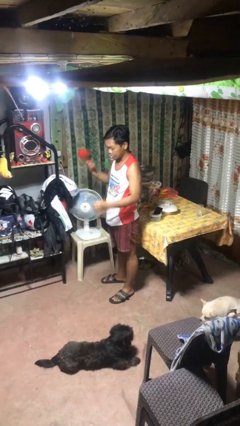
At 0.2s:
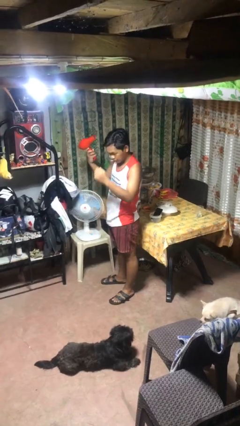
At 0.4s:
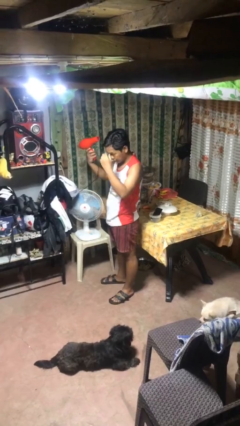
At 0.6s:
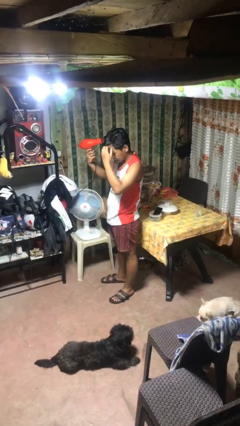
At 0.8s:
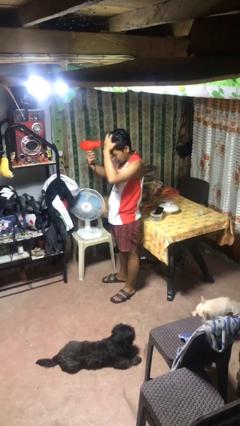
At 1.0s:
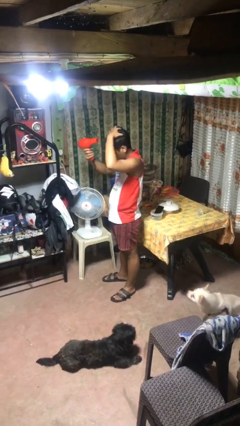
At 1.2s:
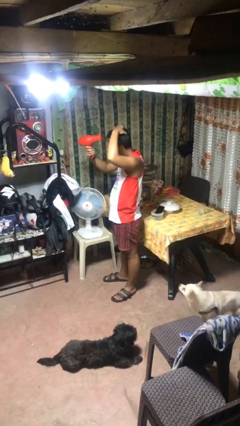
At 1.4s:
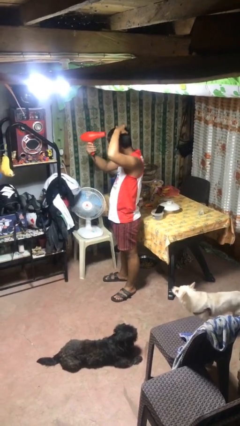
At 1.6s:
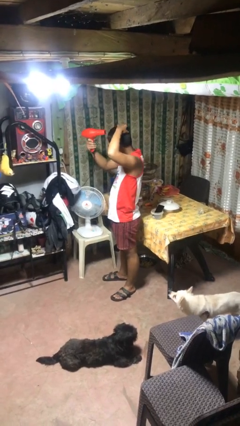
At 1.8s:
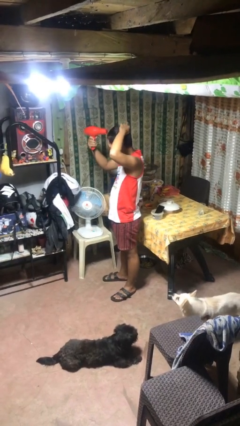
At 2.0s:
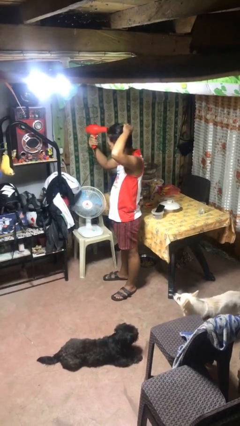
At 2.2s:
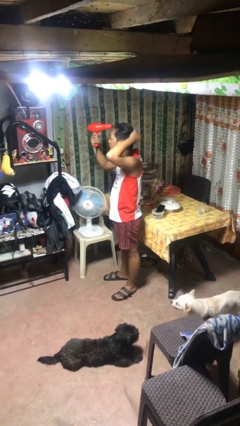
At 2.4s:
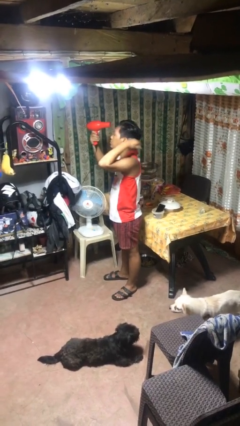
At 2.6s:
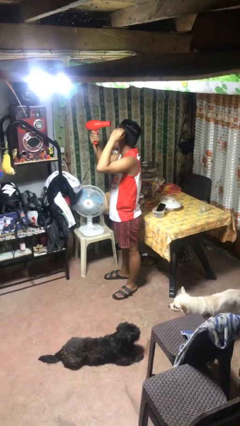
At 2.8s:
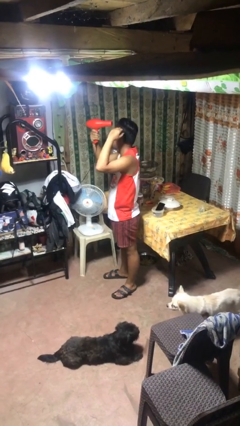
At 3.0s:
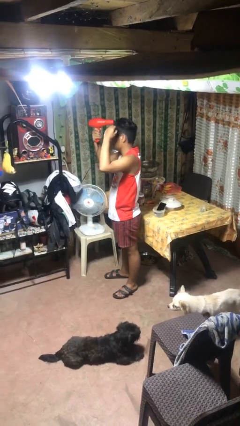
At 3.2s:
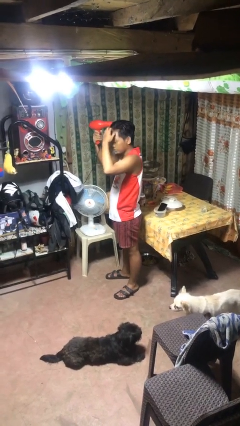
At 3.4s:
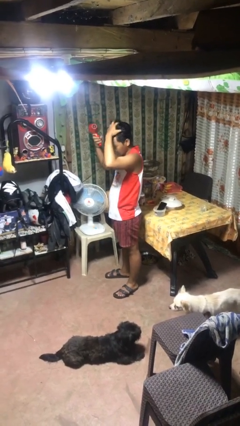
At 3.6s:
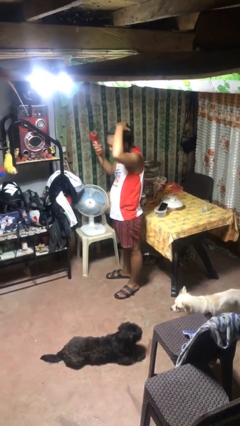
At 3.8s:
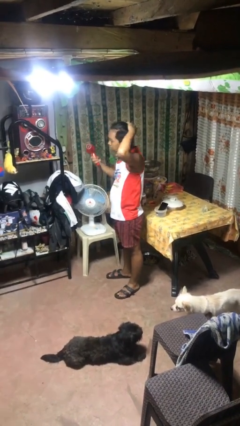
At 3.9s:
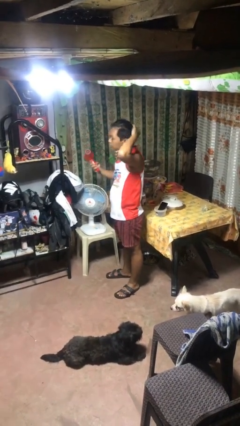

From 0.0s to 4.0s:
person dries hair with hairdryer

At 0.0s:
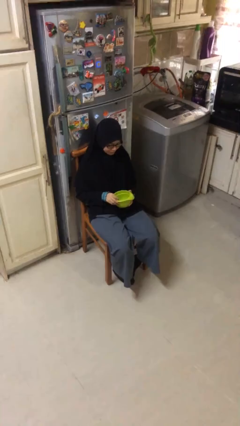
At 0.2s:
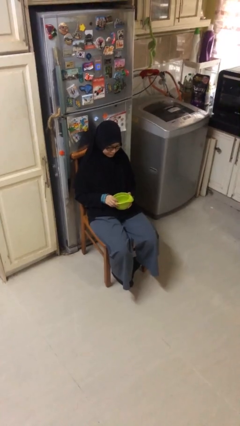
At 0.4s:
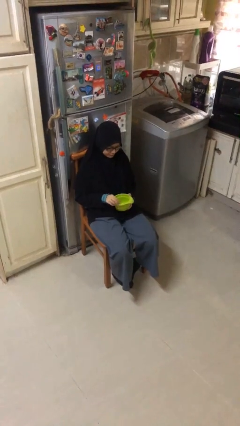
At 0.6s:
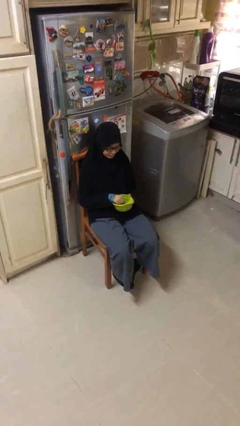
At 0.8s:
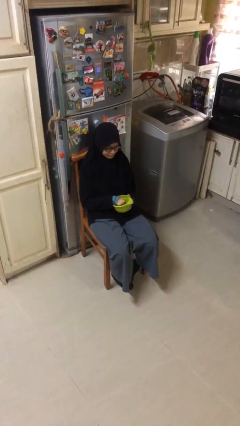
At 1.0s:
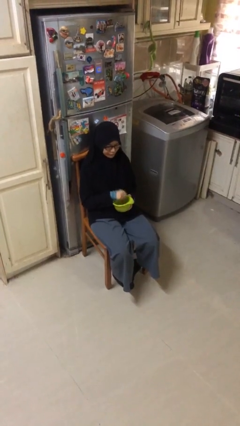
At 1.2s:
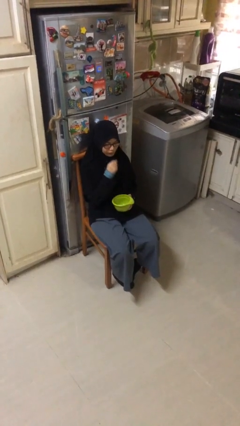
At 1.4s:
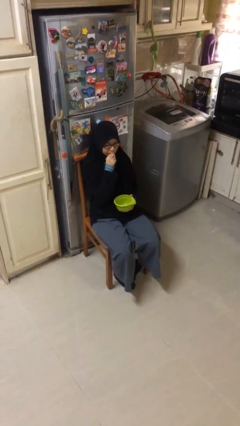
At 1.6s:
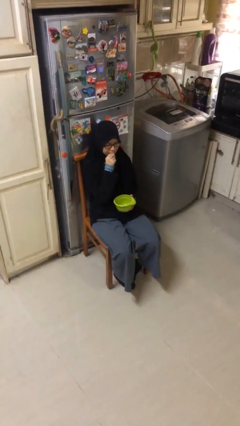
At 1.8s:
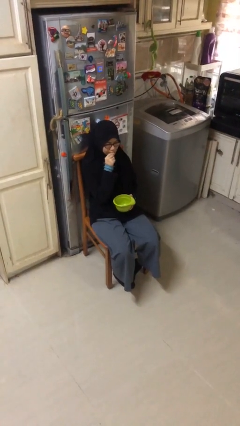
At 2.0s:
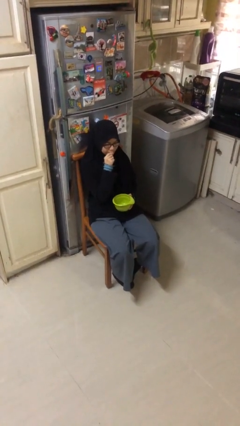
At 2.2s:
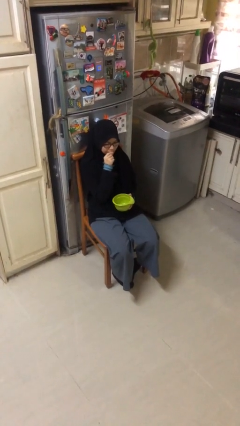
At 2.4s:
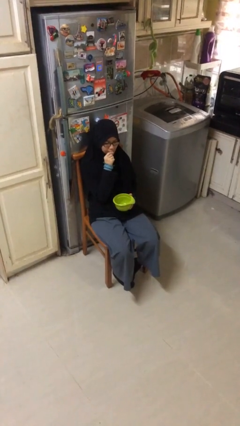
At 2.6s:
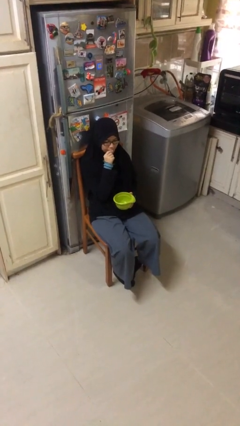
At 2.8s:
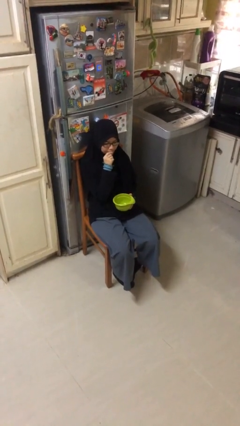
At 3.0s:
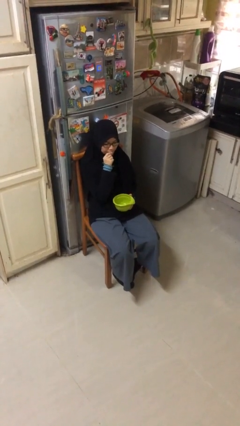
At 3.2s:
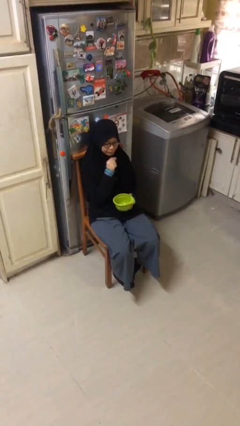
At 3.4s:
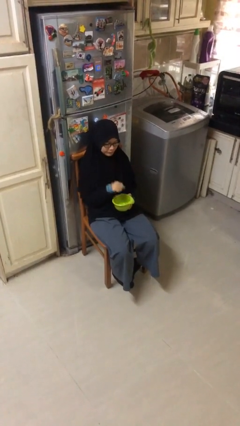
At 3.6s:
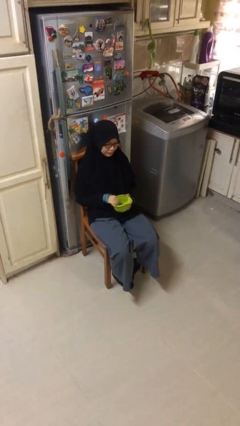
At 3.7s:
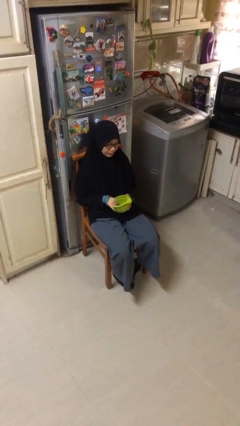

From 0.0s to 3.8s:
person eats with hands

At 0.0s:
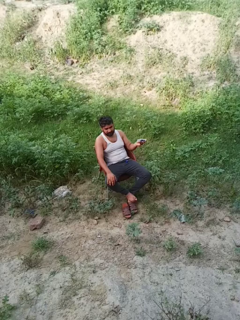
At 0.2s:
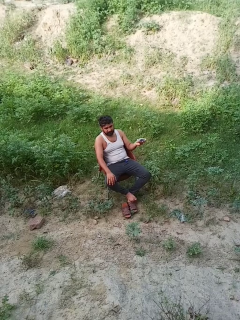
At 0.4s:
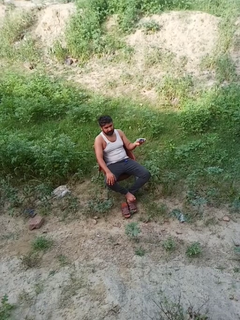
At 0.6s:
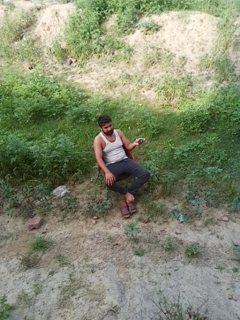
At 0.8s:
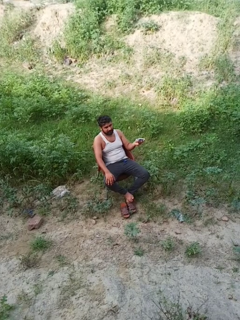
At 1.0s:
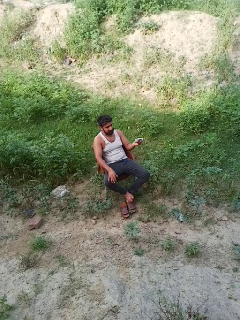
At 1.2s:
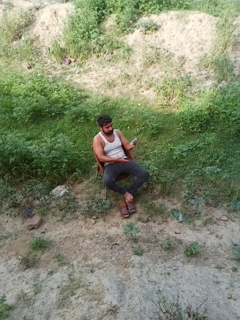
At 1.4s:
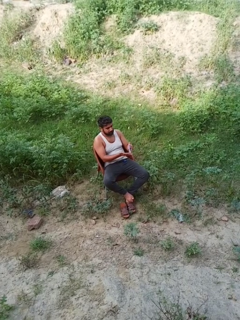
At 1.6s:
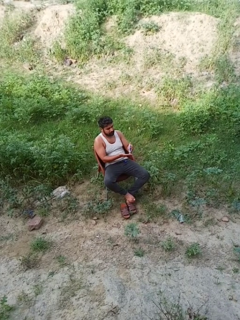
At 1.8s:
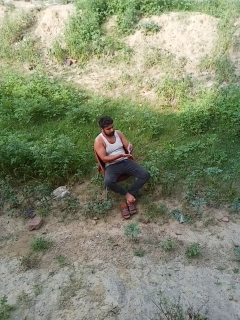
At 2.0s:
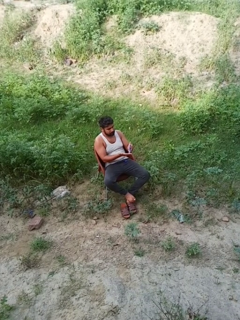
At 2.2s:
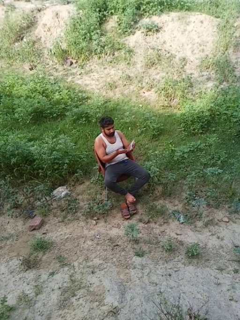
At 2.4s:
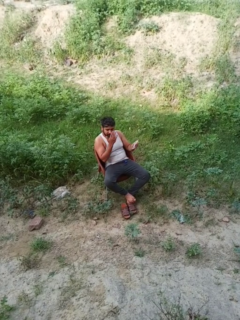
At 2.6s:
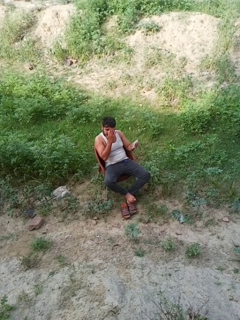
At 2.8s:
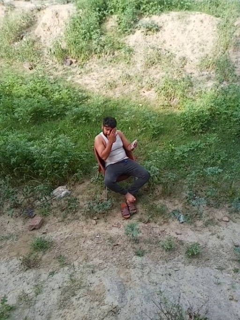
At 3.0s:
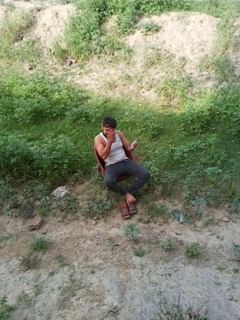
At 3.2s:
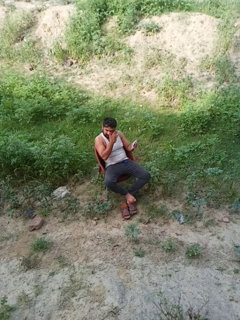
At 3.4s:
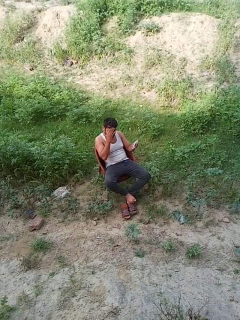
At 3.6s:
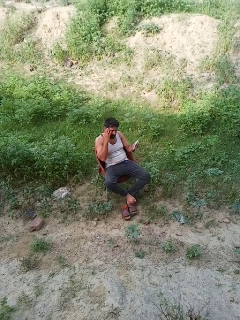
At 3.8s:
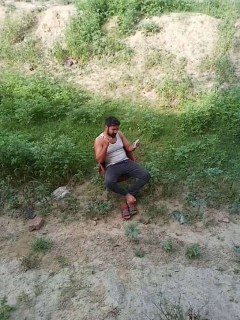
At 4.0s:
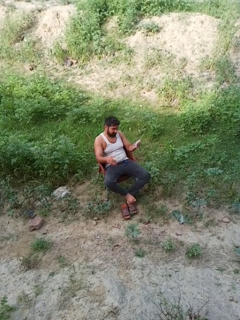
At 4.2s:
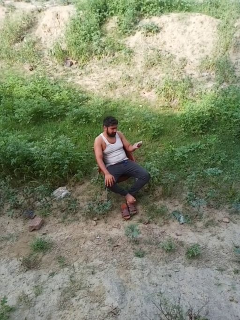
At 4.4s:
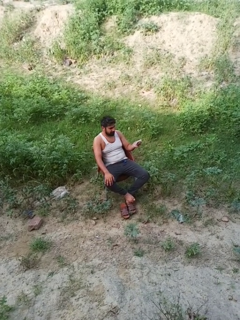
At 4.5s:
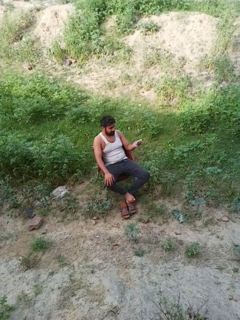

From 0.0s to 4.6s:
person applies sunscreen

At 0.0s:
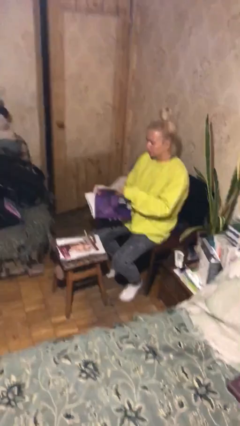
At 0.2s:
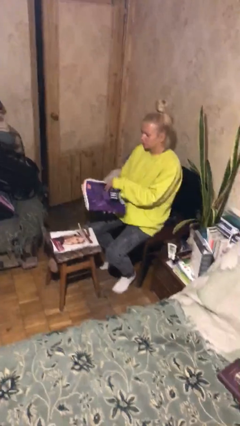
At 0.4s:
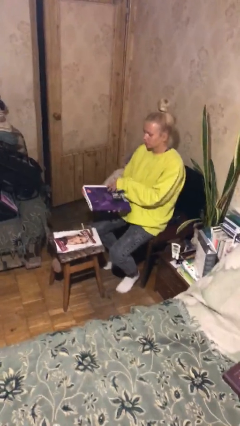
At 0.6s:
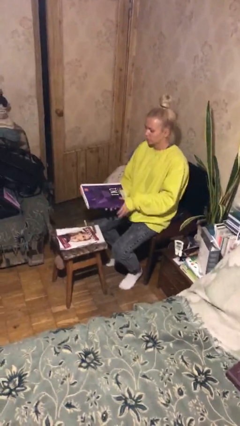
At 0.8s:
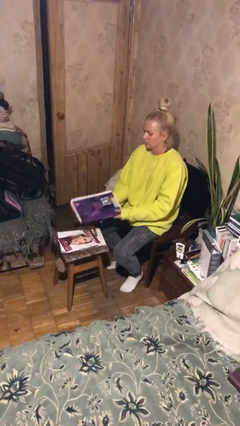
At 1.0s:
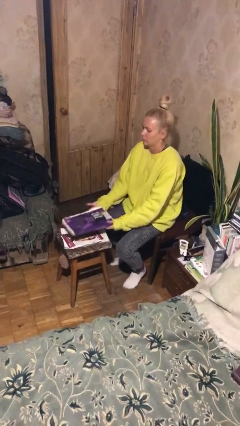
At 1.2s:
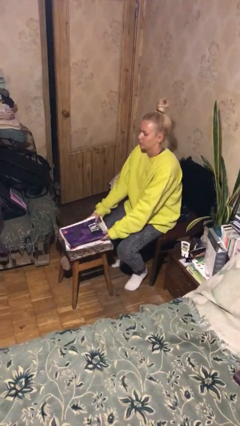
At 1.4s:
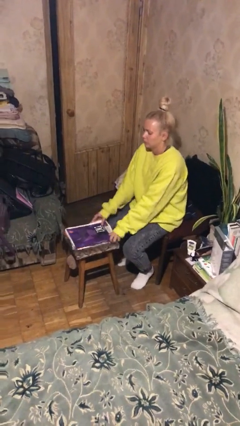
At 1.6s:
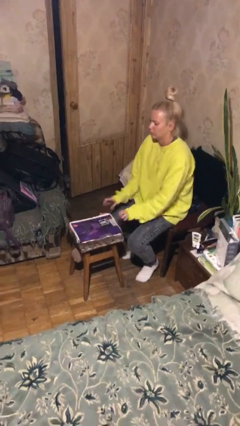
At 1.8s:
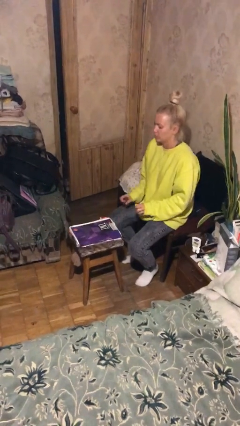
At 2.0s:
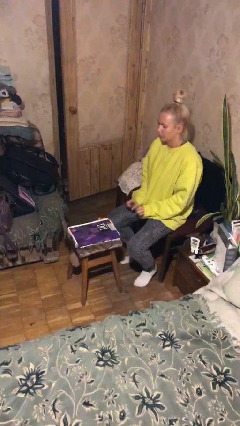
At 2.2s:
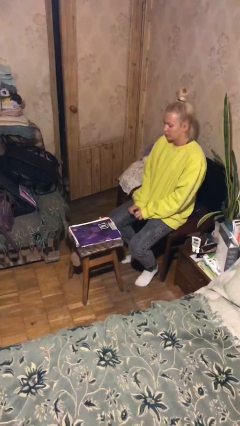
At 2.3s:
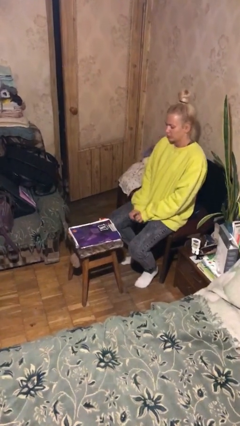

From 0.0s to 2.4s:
person puts down object on table

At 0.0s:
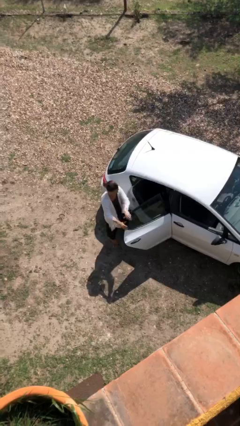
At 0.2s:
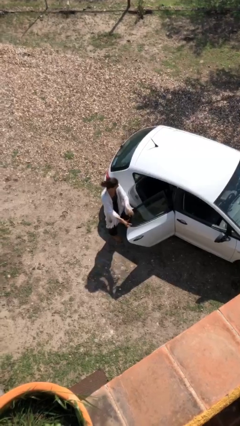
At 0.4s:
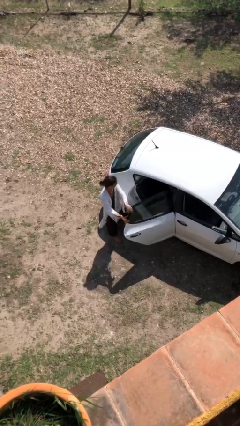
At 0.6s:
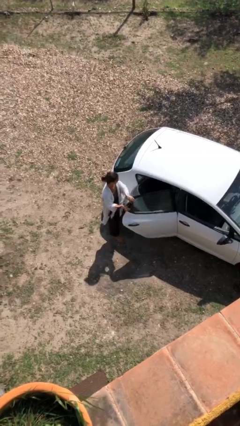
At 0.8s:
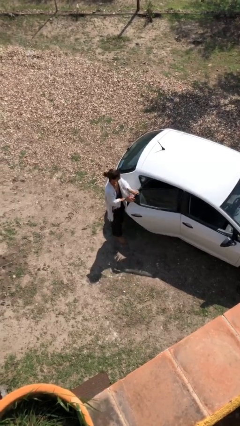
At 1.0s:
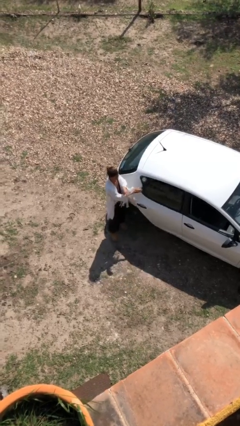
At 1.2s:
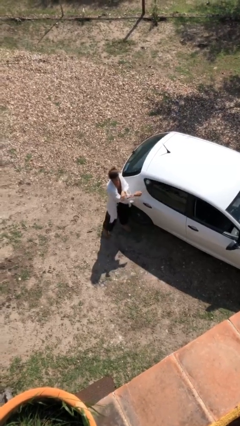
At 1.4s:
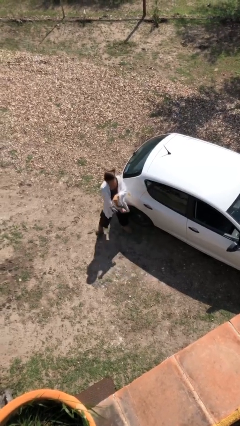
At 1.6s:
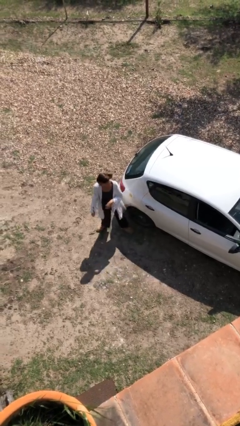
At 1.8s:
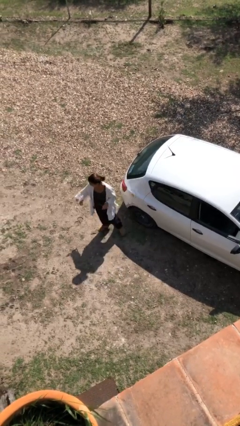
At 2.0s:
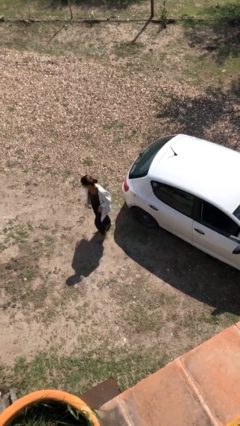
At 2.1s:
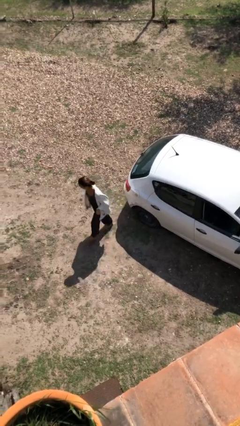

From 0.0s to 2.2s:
person closes car door

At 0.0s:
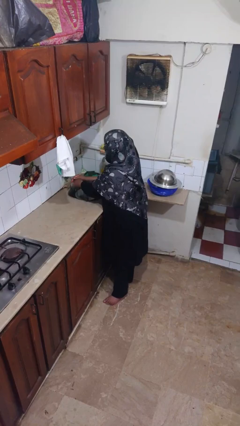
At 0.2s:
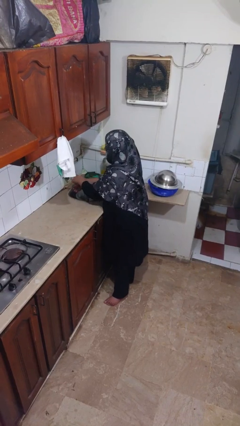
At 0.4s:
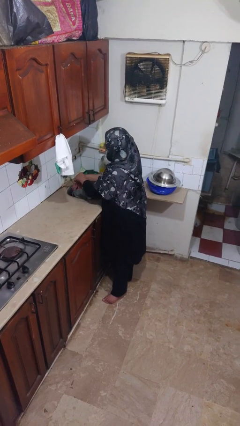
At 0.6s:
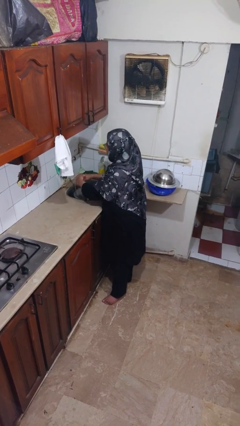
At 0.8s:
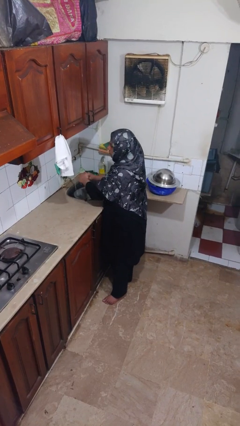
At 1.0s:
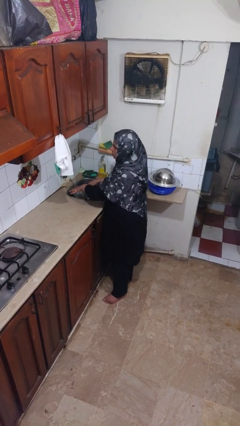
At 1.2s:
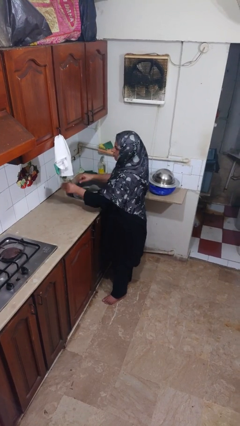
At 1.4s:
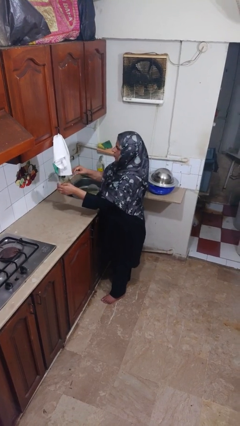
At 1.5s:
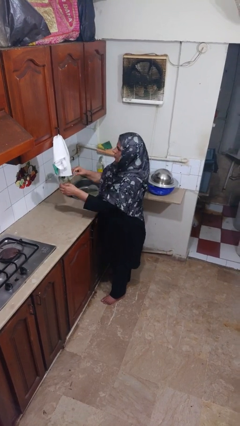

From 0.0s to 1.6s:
person washes hands
